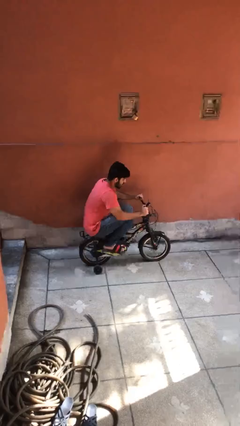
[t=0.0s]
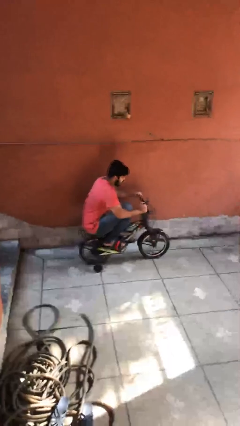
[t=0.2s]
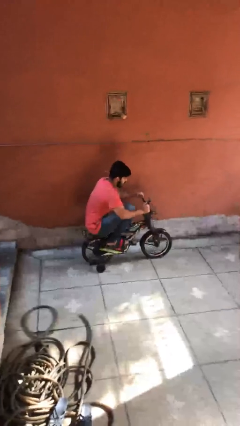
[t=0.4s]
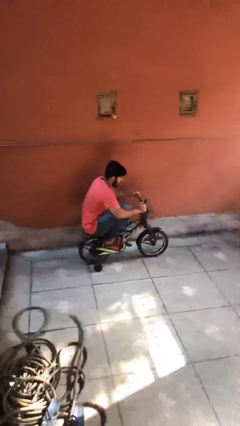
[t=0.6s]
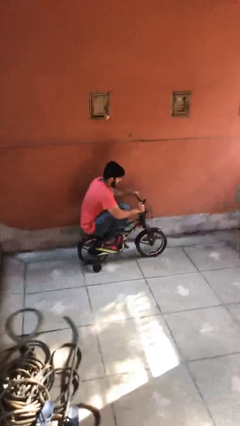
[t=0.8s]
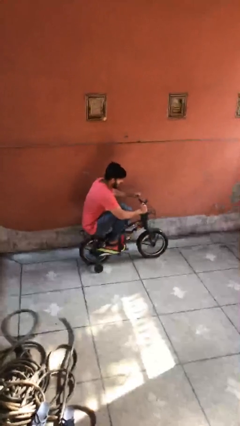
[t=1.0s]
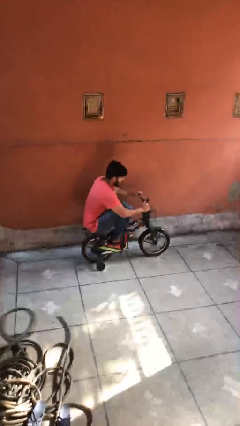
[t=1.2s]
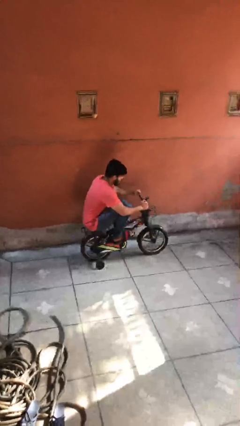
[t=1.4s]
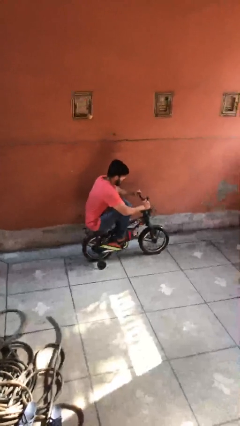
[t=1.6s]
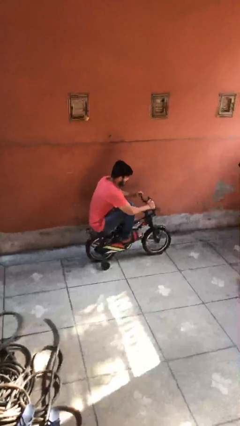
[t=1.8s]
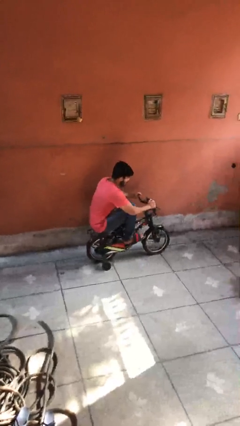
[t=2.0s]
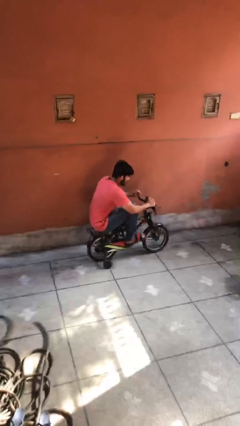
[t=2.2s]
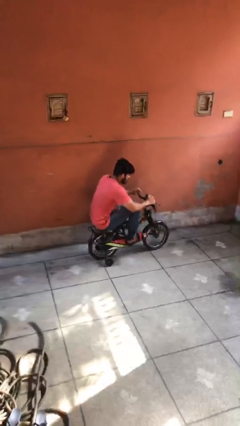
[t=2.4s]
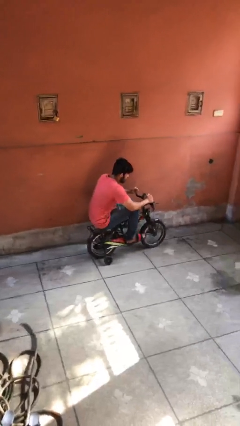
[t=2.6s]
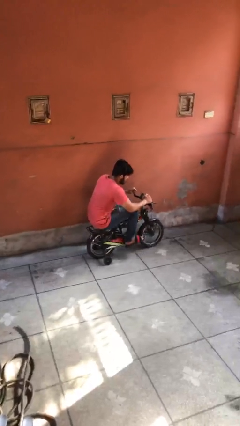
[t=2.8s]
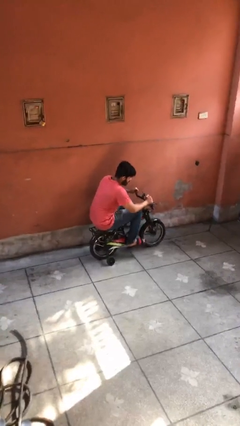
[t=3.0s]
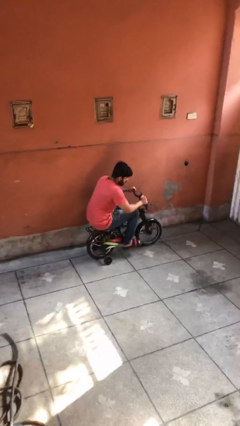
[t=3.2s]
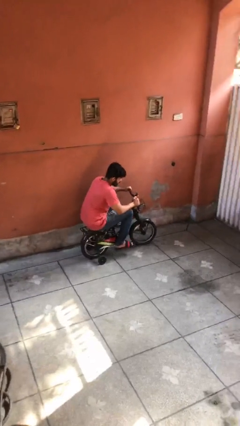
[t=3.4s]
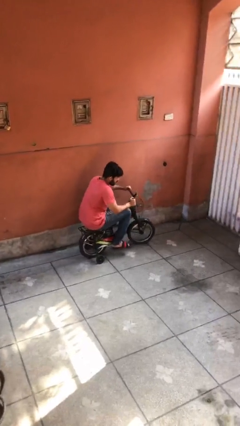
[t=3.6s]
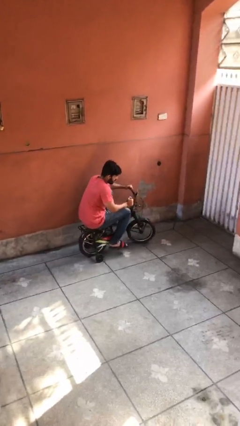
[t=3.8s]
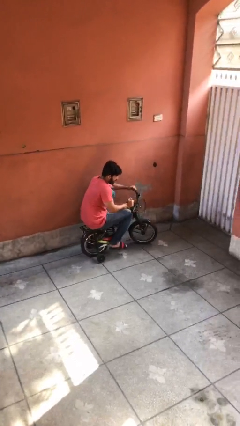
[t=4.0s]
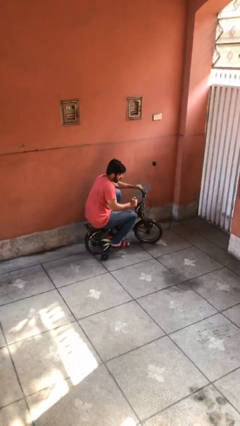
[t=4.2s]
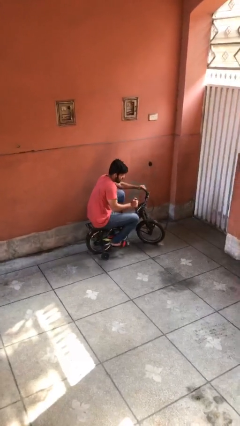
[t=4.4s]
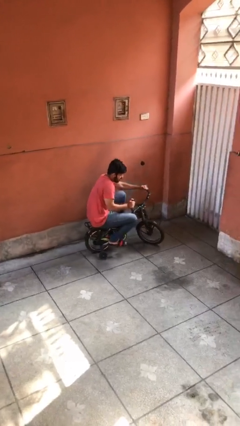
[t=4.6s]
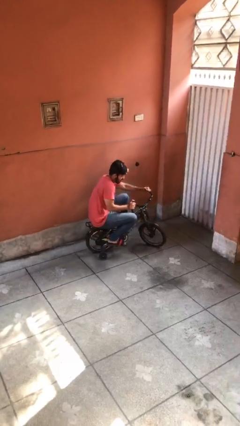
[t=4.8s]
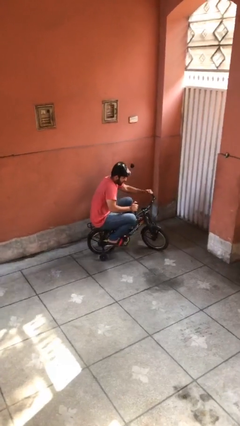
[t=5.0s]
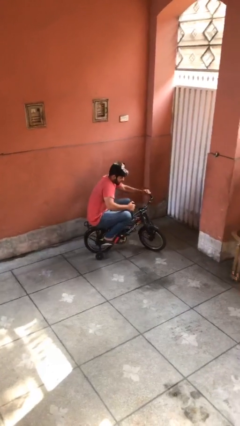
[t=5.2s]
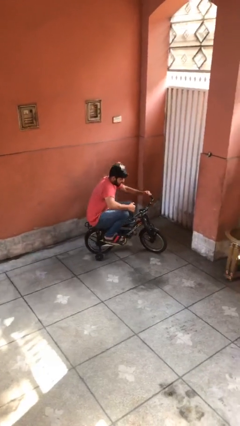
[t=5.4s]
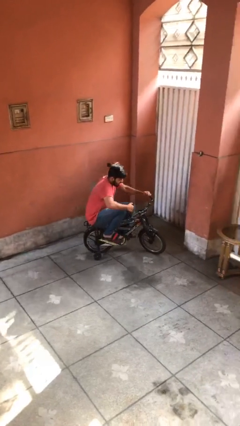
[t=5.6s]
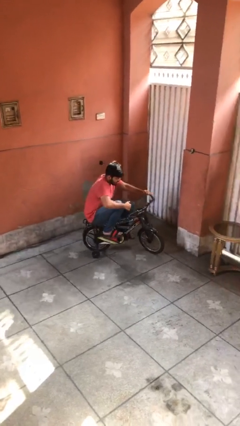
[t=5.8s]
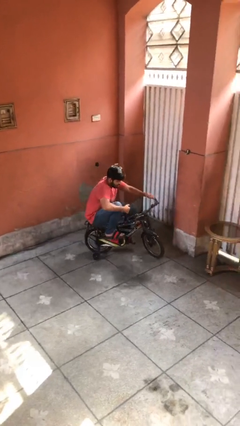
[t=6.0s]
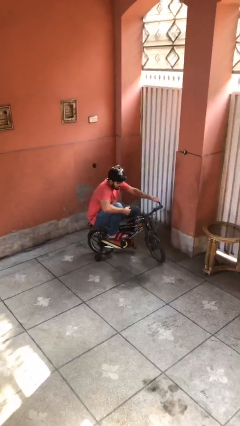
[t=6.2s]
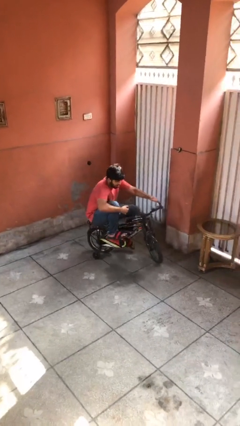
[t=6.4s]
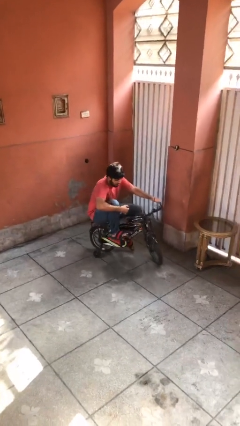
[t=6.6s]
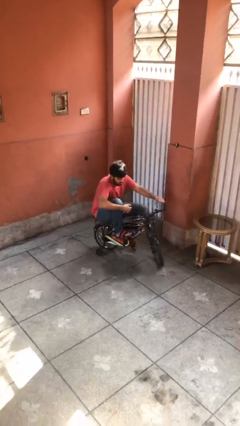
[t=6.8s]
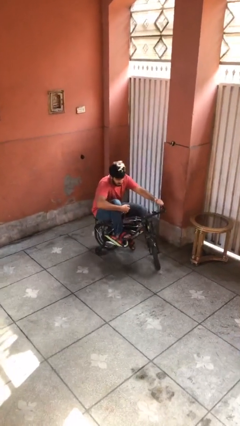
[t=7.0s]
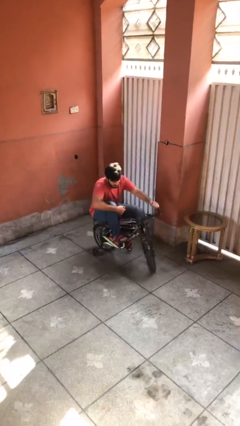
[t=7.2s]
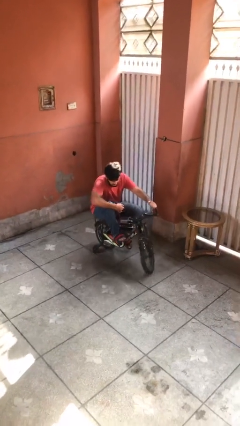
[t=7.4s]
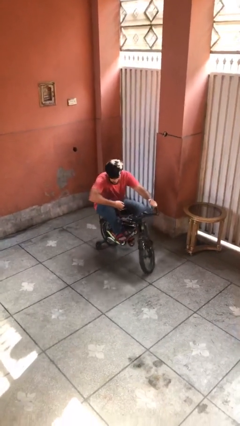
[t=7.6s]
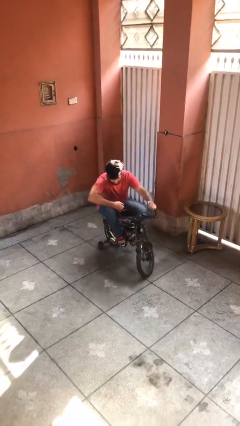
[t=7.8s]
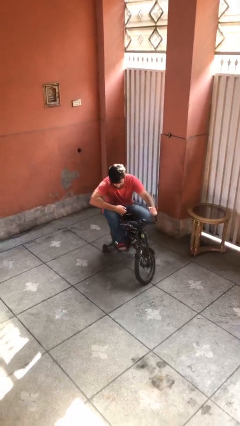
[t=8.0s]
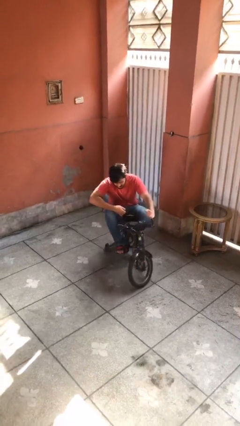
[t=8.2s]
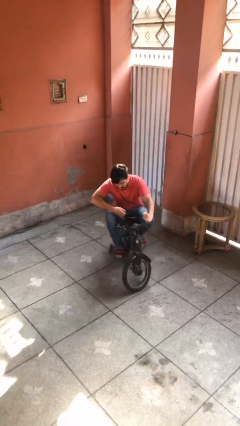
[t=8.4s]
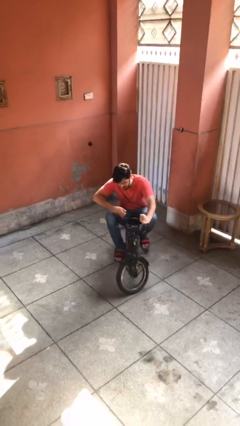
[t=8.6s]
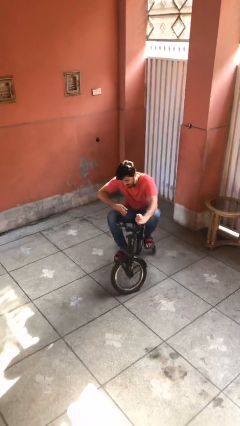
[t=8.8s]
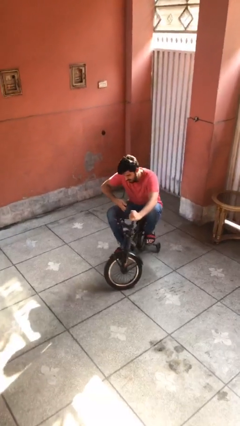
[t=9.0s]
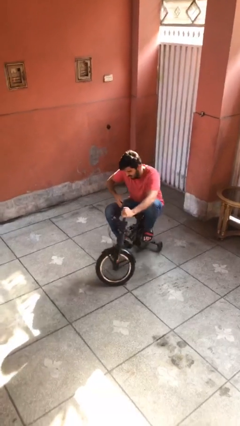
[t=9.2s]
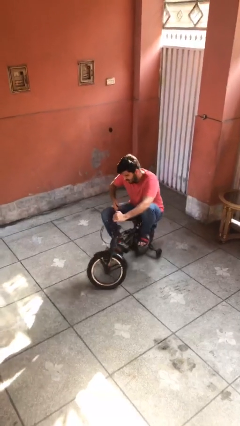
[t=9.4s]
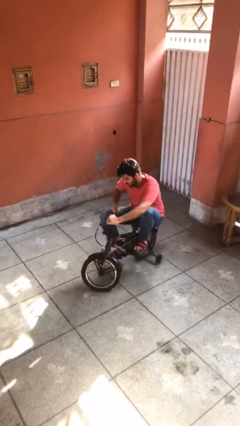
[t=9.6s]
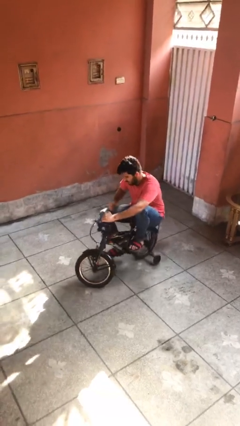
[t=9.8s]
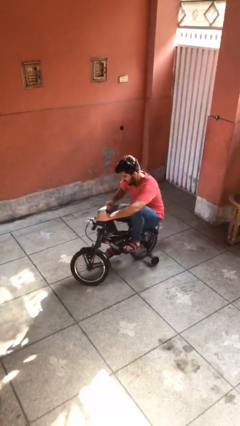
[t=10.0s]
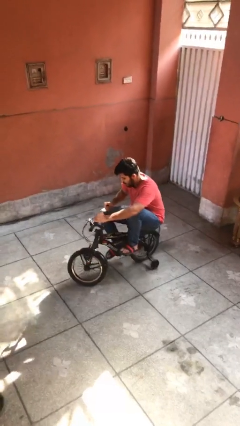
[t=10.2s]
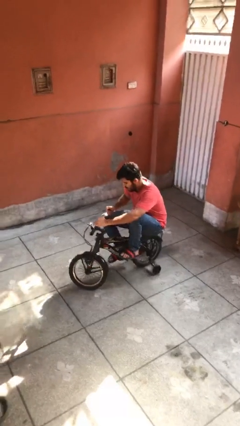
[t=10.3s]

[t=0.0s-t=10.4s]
person rides bicycle

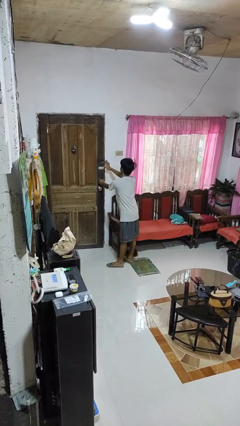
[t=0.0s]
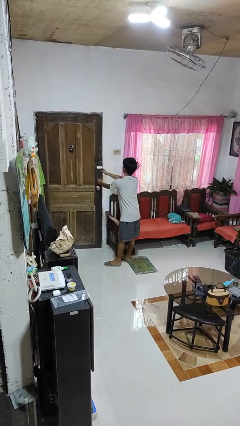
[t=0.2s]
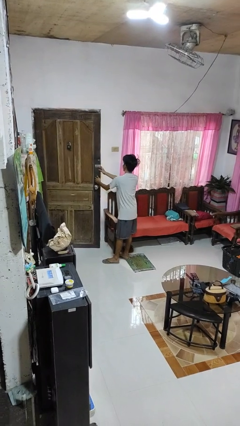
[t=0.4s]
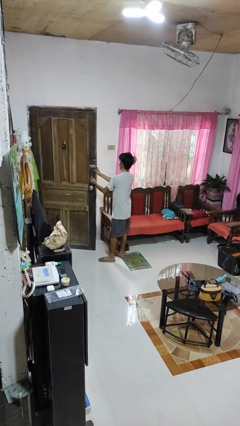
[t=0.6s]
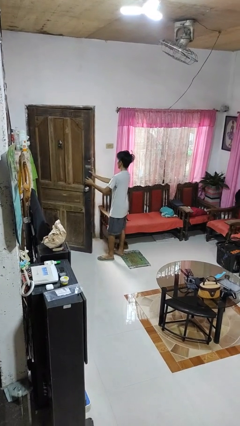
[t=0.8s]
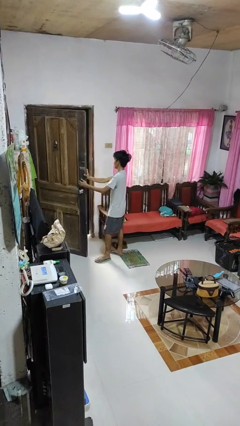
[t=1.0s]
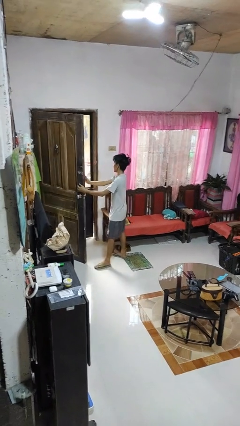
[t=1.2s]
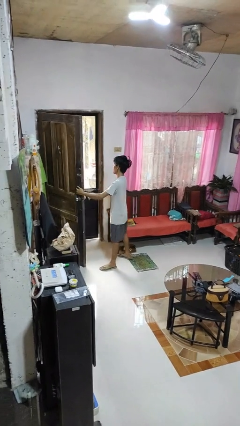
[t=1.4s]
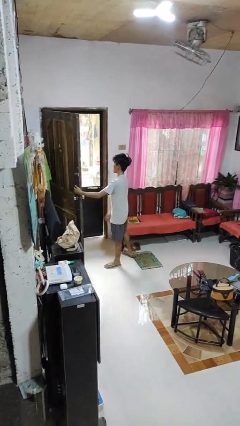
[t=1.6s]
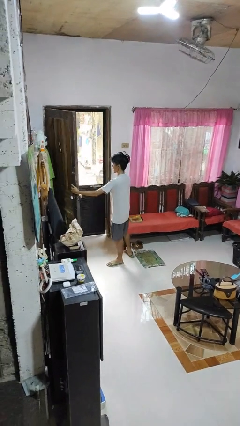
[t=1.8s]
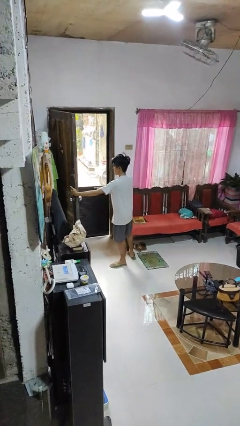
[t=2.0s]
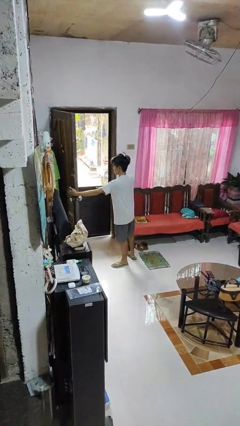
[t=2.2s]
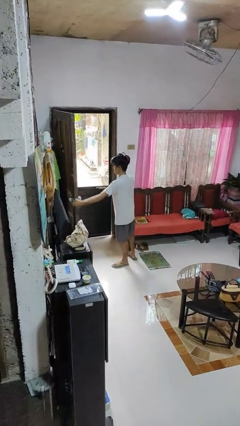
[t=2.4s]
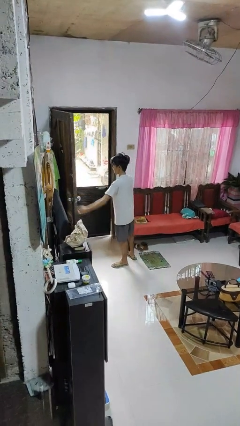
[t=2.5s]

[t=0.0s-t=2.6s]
person opens facility door

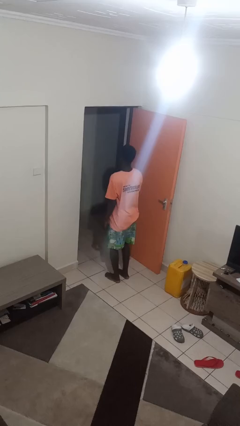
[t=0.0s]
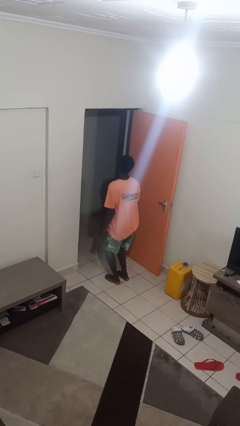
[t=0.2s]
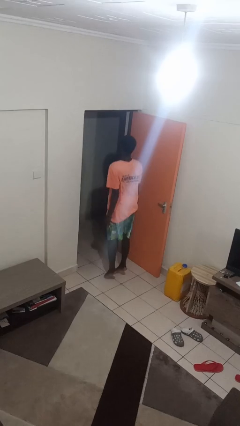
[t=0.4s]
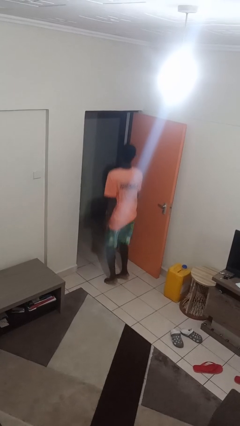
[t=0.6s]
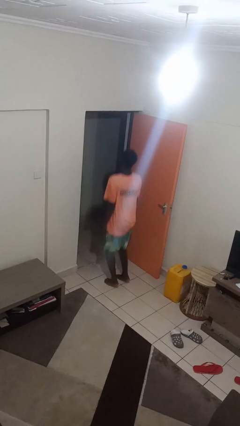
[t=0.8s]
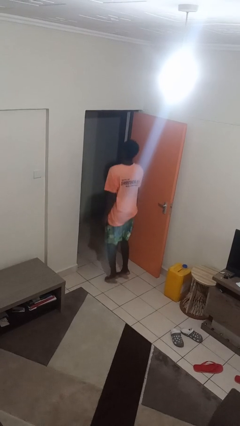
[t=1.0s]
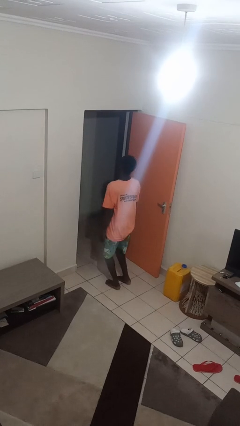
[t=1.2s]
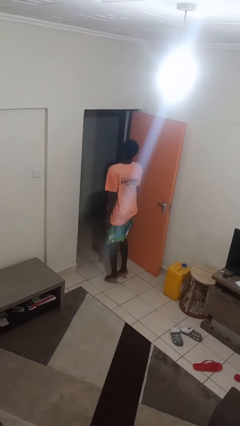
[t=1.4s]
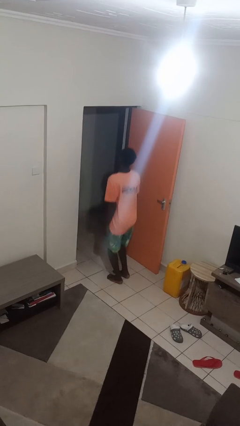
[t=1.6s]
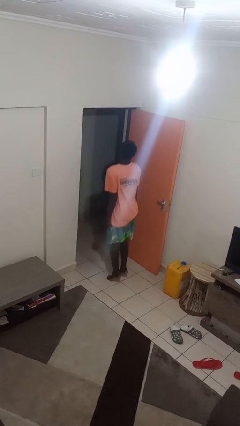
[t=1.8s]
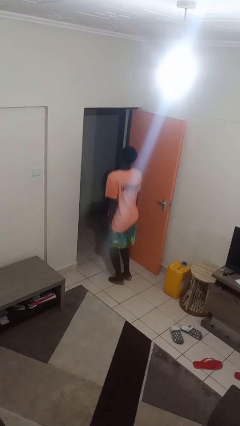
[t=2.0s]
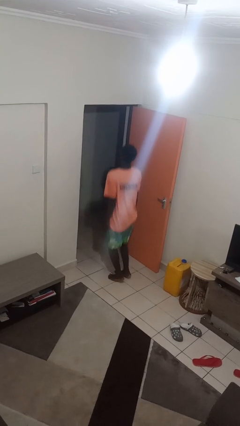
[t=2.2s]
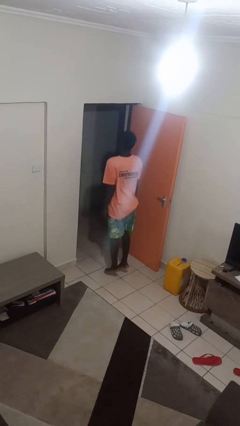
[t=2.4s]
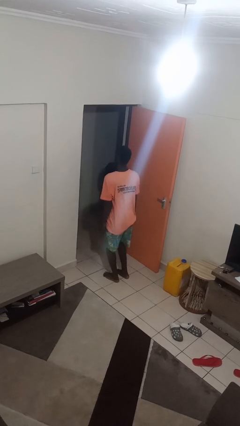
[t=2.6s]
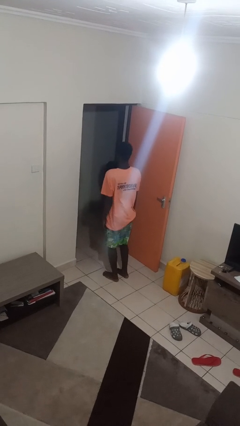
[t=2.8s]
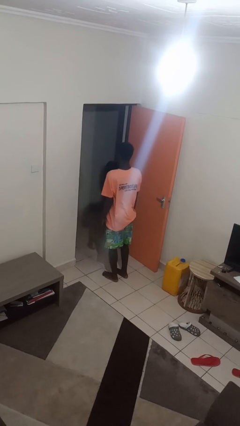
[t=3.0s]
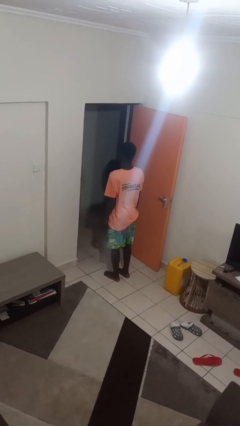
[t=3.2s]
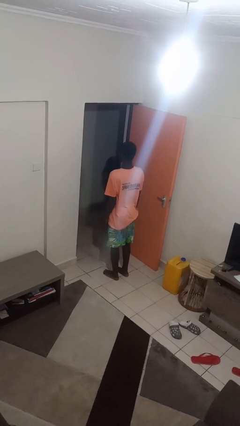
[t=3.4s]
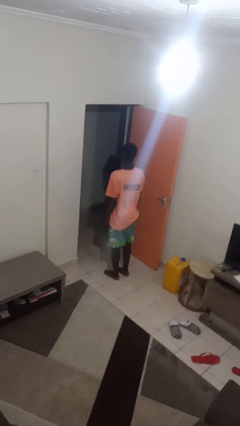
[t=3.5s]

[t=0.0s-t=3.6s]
person jumps

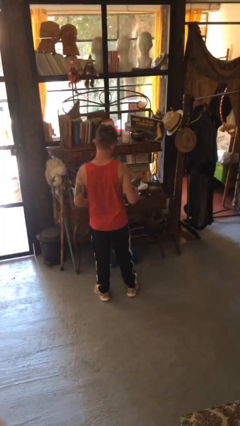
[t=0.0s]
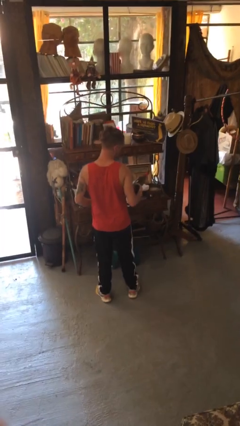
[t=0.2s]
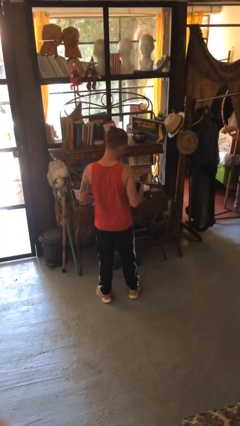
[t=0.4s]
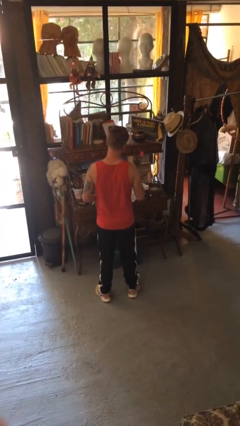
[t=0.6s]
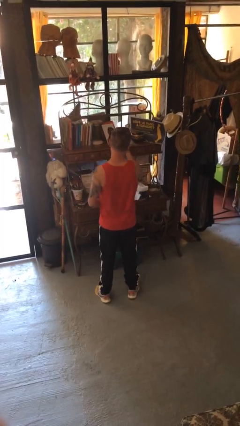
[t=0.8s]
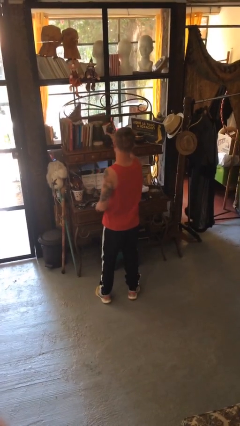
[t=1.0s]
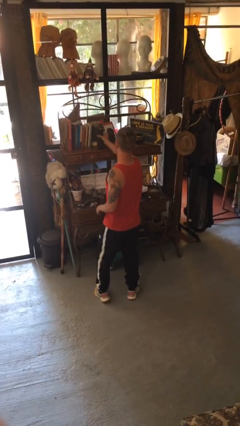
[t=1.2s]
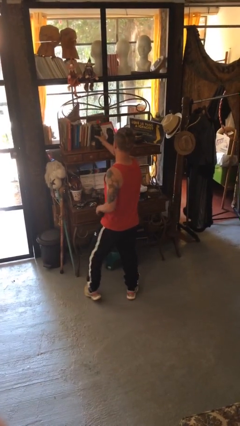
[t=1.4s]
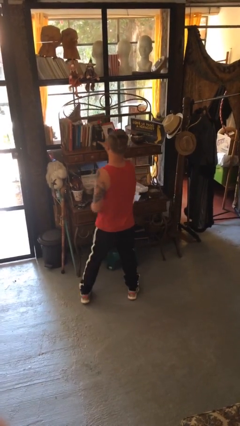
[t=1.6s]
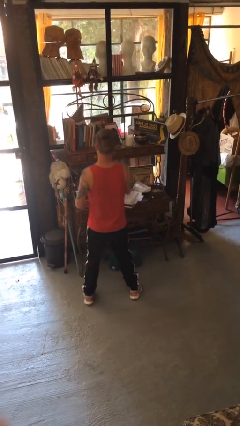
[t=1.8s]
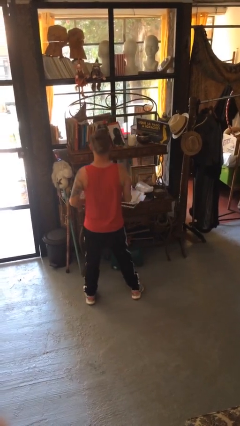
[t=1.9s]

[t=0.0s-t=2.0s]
person puts down object on shelf
